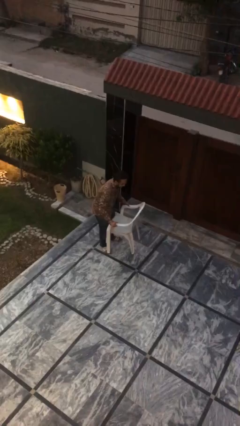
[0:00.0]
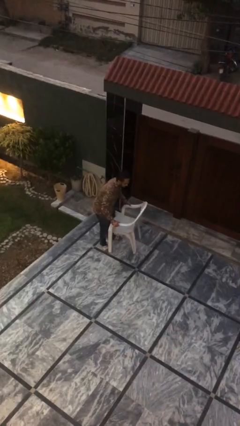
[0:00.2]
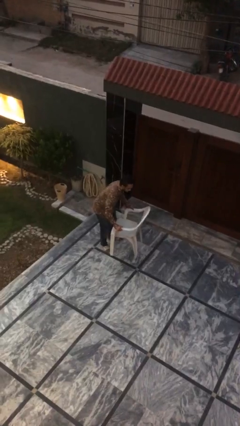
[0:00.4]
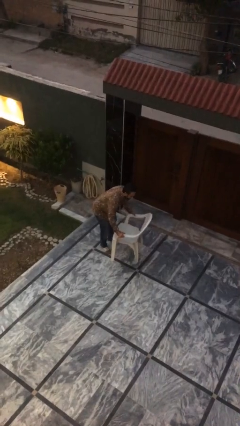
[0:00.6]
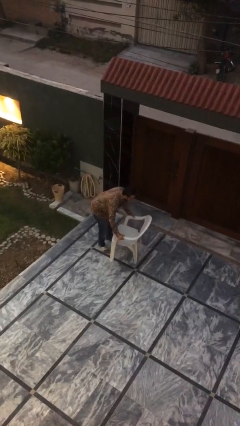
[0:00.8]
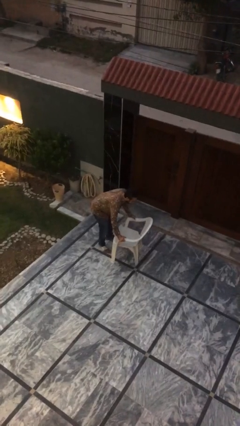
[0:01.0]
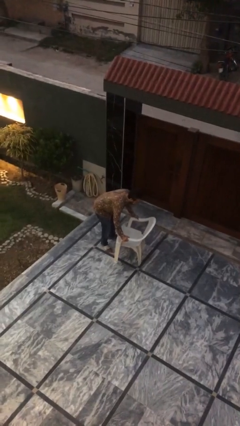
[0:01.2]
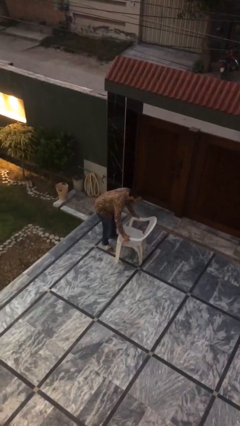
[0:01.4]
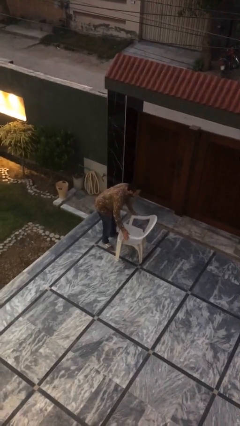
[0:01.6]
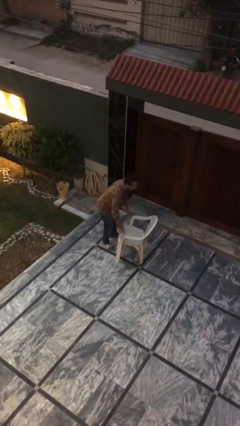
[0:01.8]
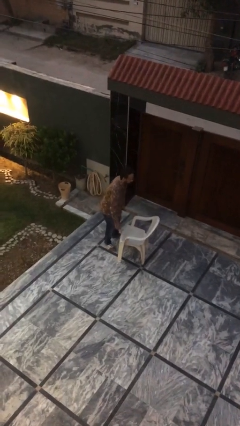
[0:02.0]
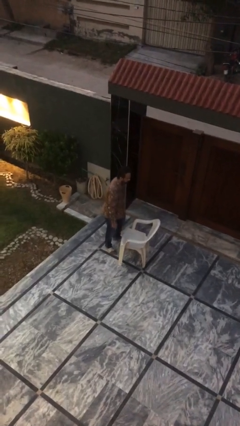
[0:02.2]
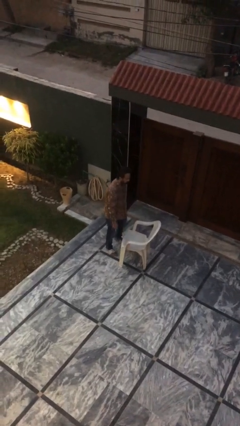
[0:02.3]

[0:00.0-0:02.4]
person puts down object on floor

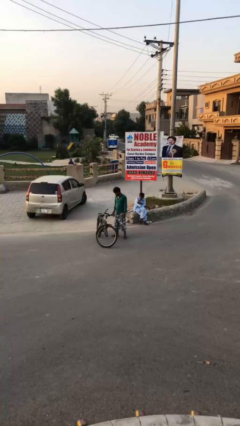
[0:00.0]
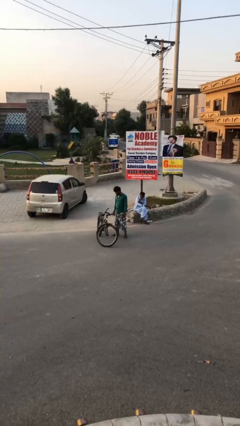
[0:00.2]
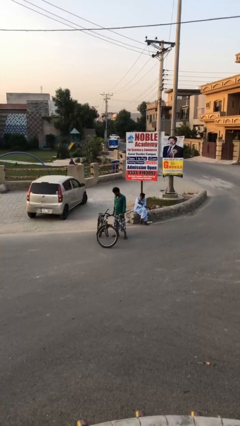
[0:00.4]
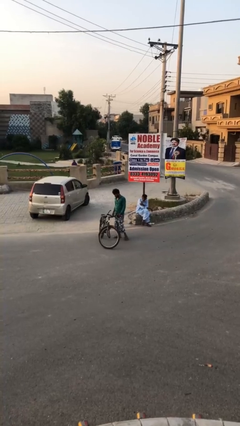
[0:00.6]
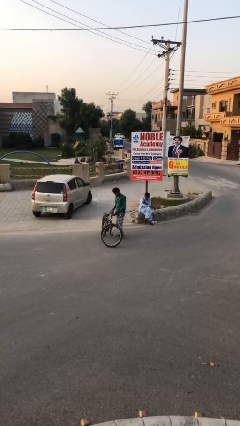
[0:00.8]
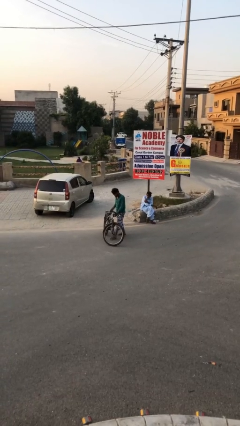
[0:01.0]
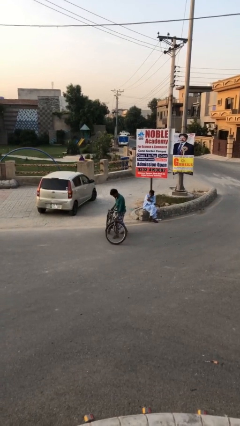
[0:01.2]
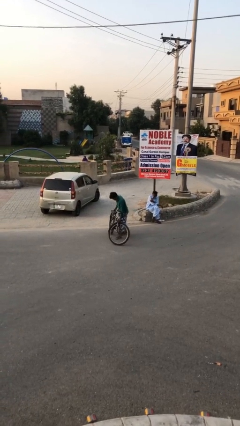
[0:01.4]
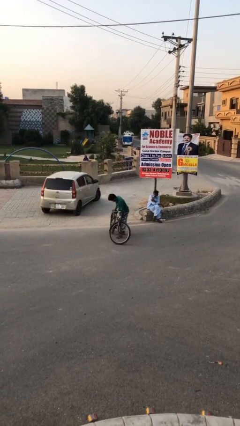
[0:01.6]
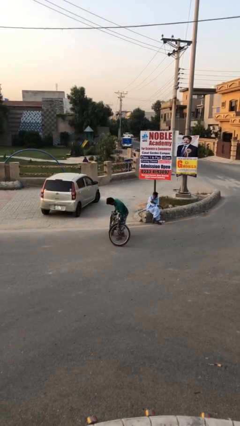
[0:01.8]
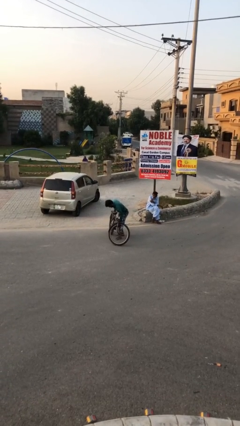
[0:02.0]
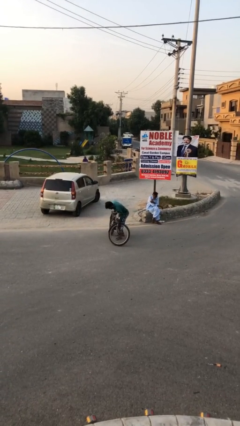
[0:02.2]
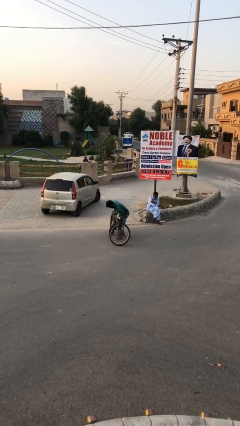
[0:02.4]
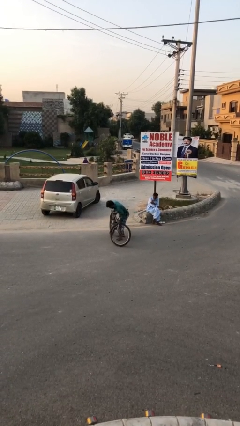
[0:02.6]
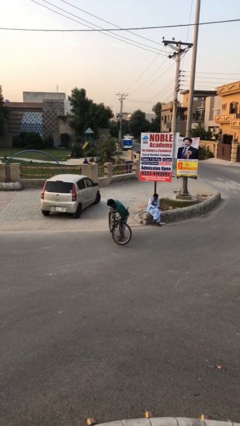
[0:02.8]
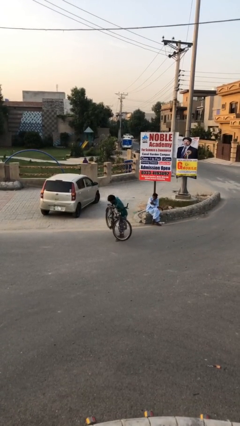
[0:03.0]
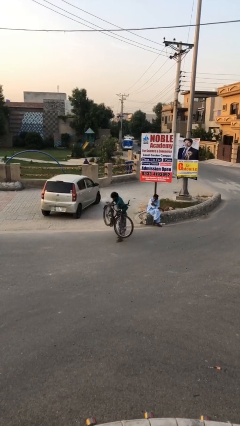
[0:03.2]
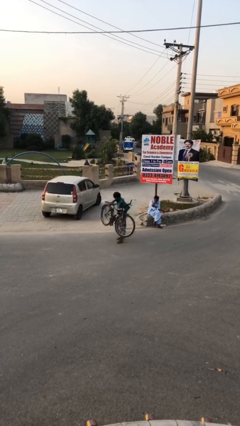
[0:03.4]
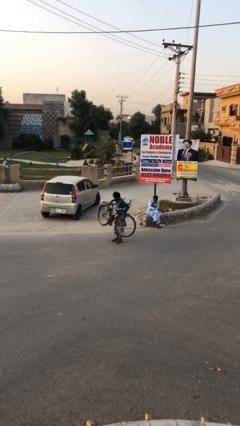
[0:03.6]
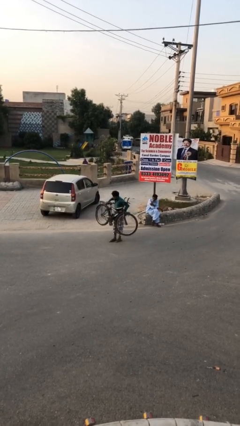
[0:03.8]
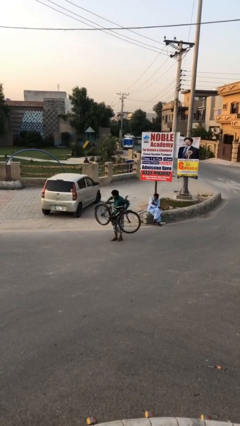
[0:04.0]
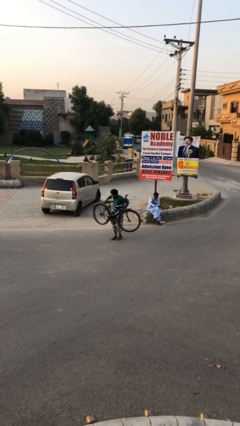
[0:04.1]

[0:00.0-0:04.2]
person picks up object from floor

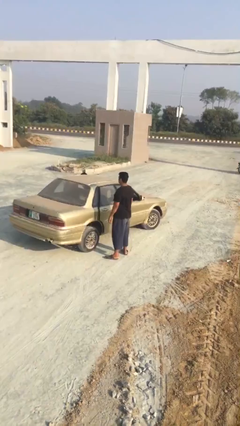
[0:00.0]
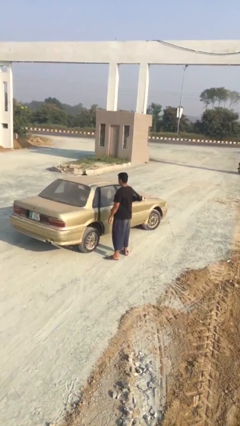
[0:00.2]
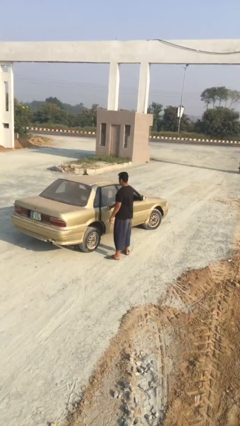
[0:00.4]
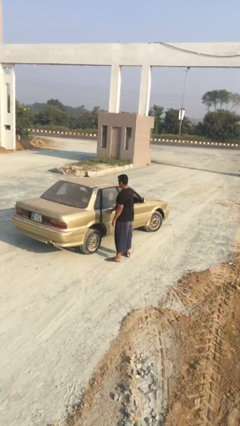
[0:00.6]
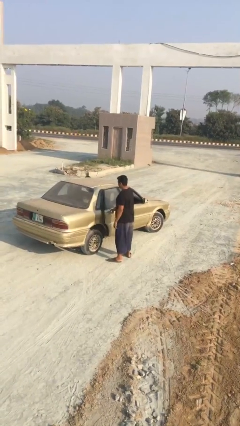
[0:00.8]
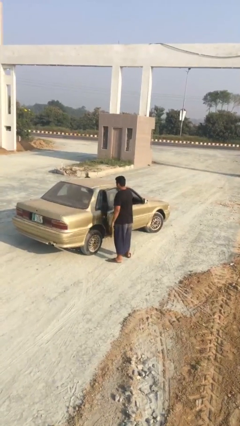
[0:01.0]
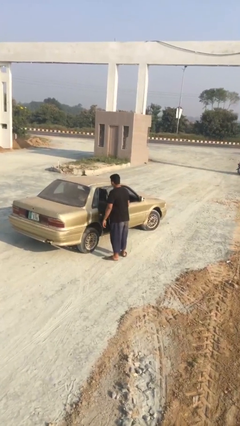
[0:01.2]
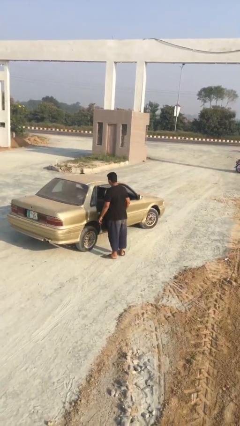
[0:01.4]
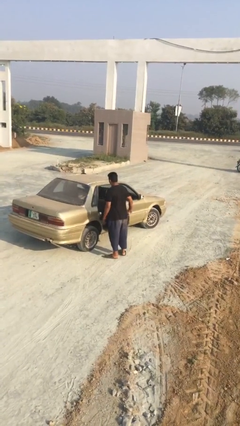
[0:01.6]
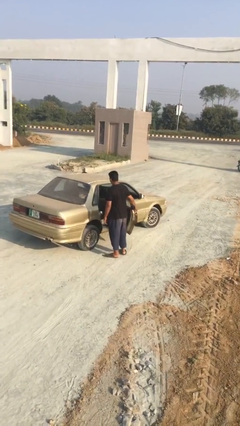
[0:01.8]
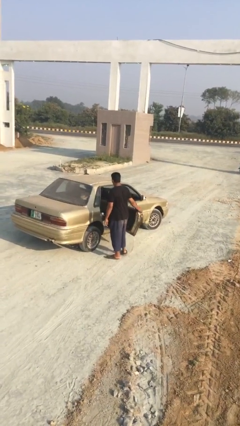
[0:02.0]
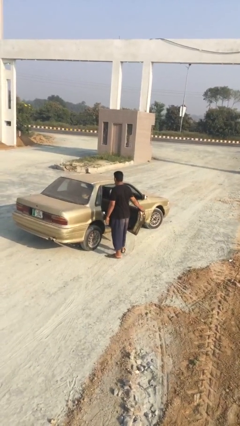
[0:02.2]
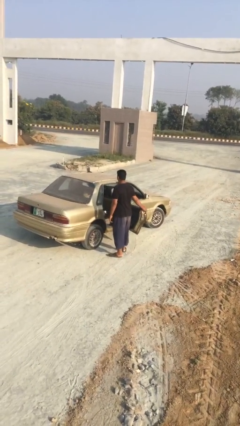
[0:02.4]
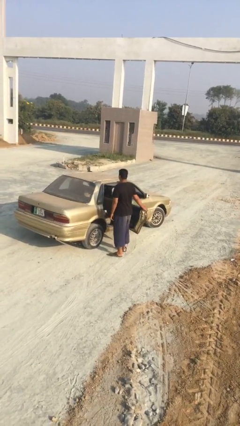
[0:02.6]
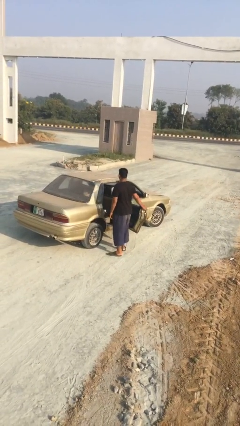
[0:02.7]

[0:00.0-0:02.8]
person opens car door

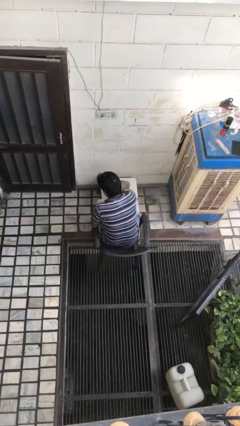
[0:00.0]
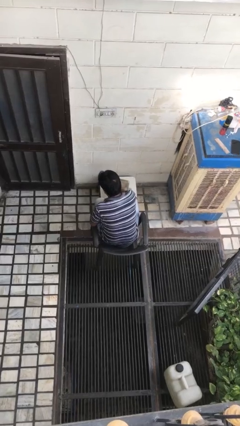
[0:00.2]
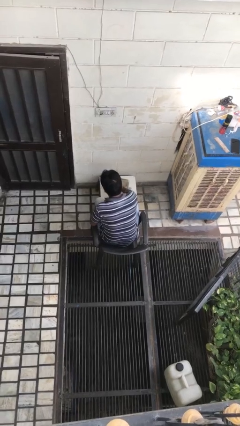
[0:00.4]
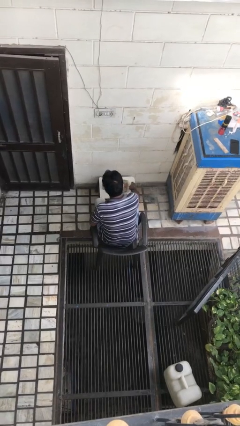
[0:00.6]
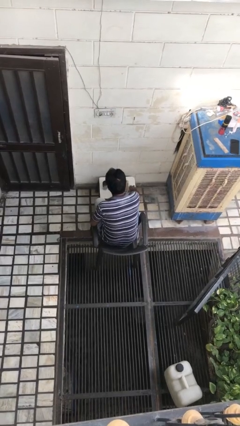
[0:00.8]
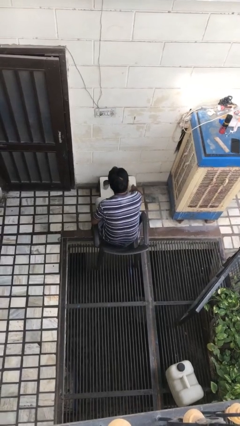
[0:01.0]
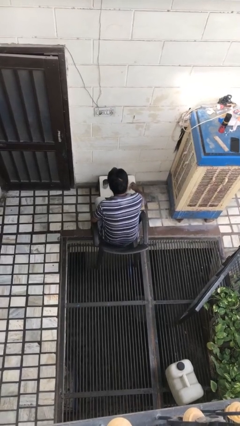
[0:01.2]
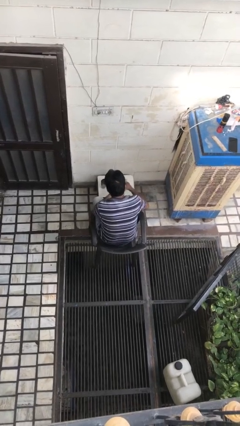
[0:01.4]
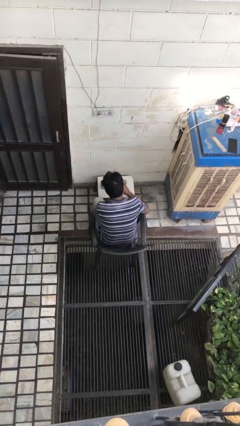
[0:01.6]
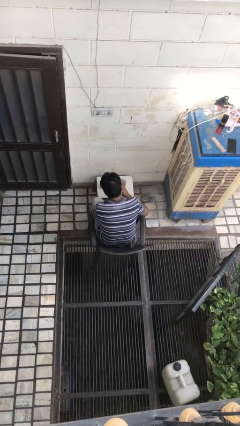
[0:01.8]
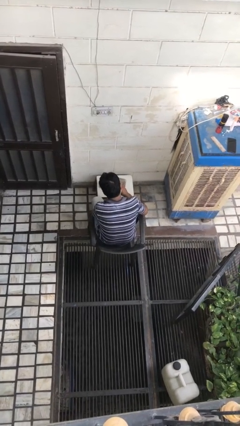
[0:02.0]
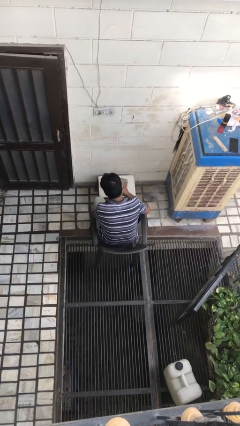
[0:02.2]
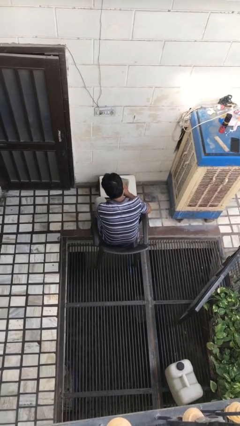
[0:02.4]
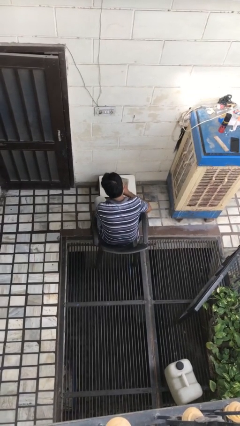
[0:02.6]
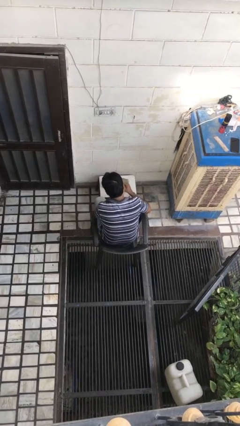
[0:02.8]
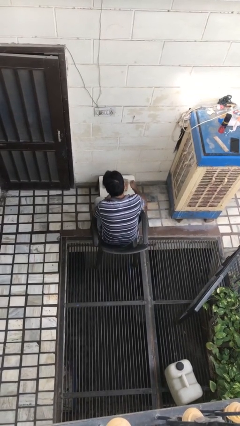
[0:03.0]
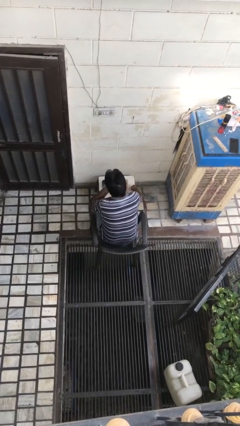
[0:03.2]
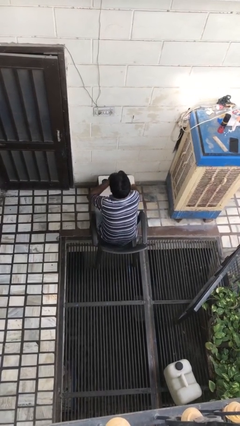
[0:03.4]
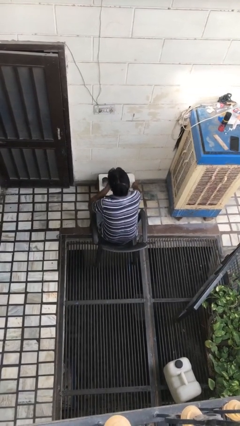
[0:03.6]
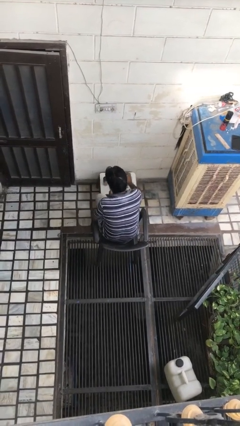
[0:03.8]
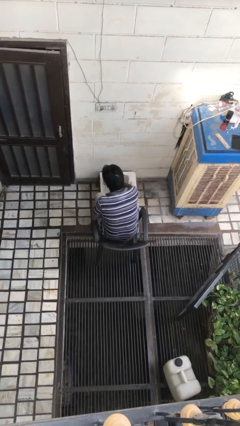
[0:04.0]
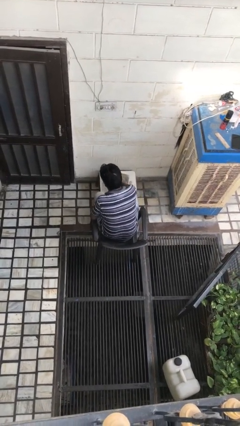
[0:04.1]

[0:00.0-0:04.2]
person takes medicine pills

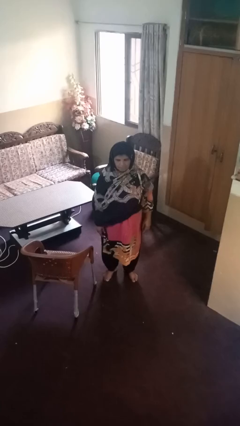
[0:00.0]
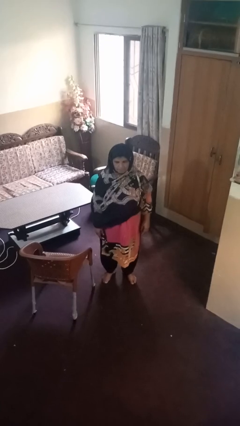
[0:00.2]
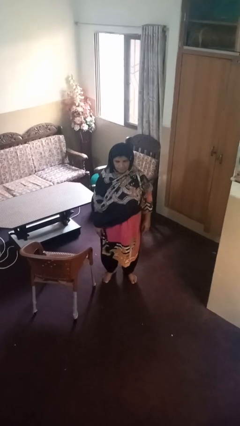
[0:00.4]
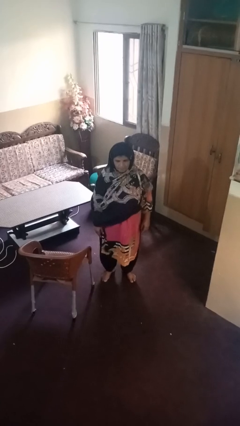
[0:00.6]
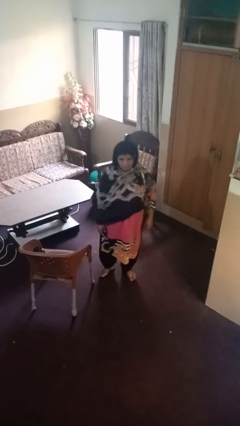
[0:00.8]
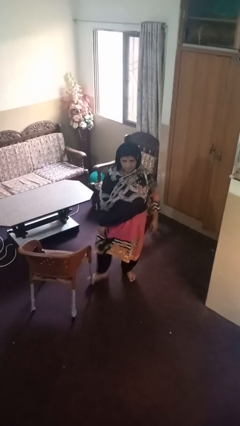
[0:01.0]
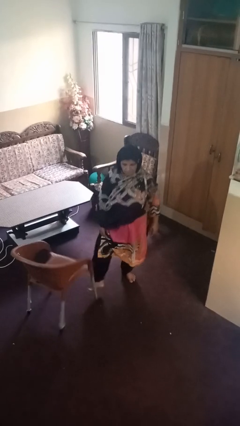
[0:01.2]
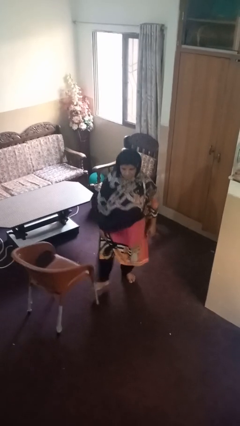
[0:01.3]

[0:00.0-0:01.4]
person trips on object on floor

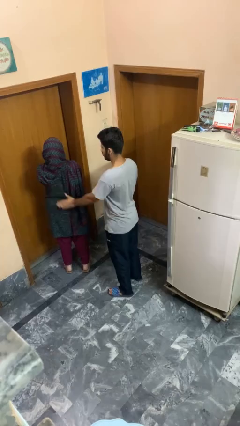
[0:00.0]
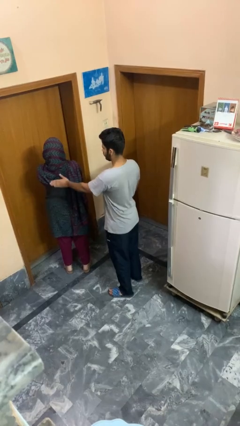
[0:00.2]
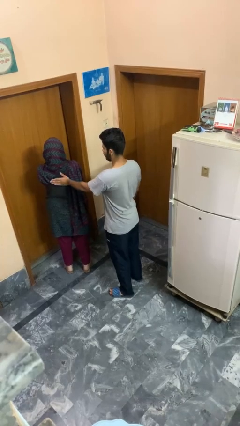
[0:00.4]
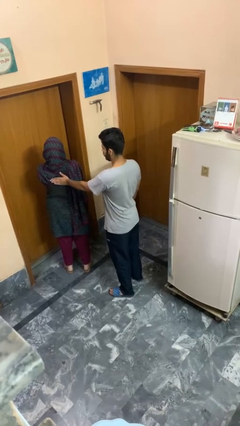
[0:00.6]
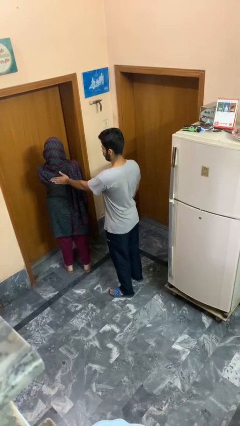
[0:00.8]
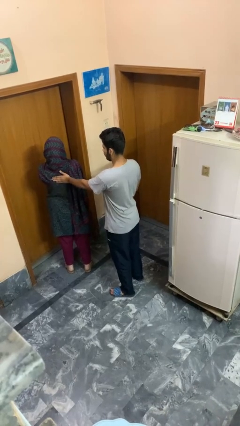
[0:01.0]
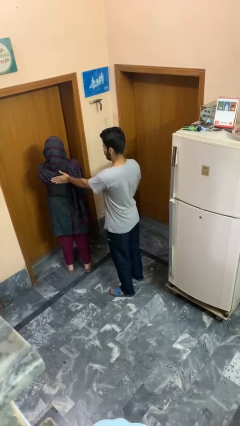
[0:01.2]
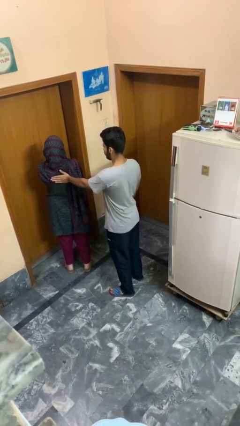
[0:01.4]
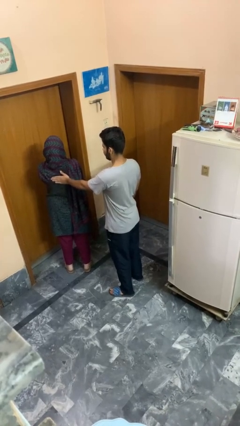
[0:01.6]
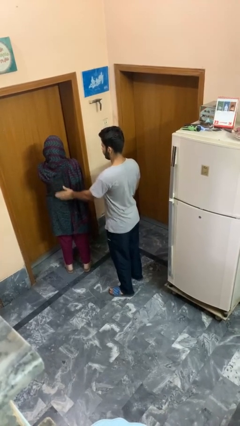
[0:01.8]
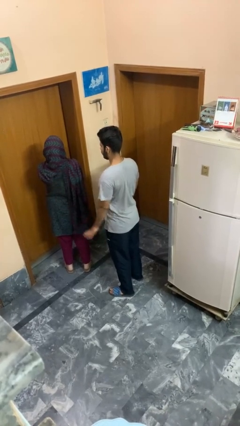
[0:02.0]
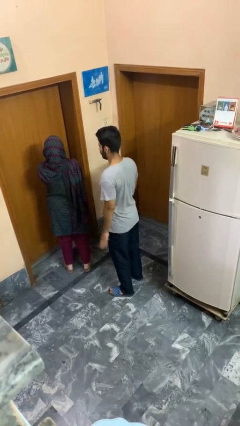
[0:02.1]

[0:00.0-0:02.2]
person touches back of person
